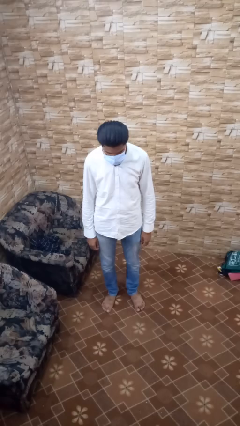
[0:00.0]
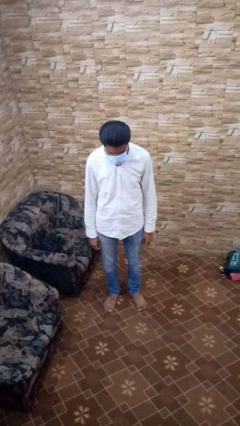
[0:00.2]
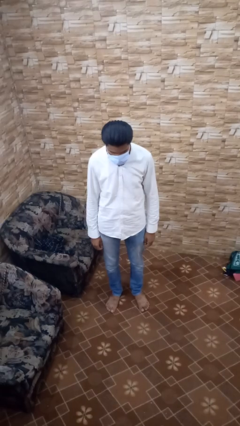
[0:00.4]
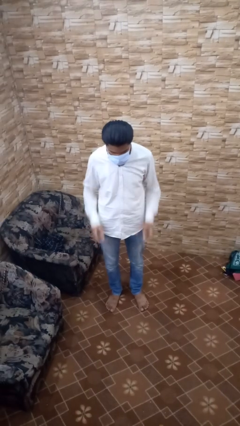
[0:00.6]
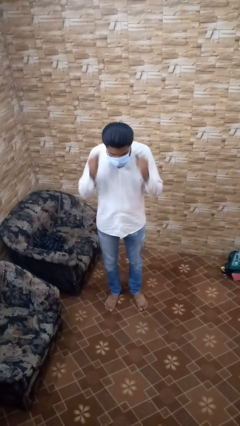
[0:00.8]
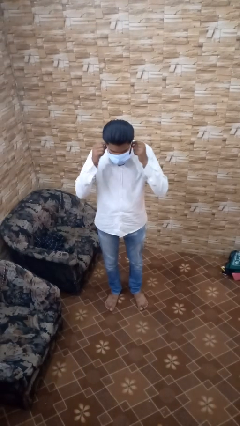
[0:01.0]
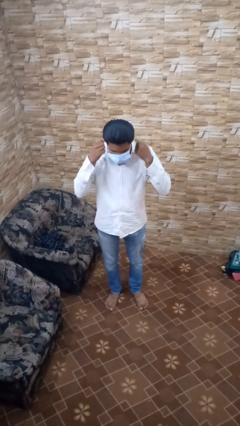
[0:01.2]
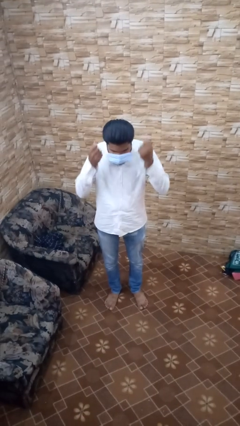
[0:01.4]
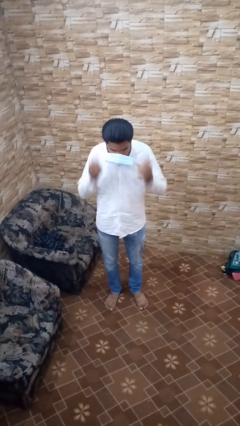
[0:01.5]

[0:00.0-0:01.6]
person takes off facemask

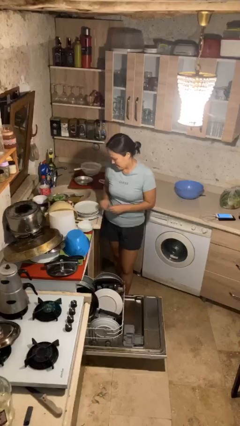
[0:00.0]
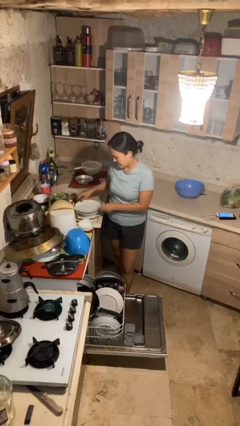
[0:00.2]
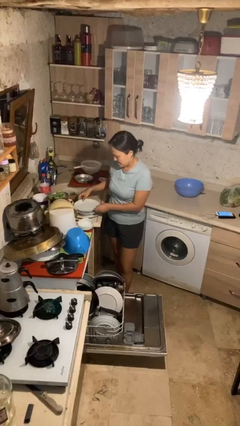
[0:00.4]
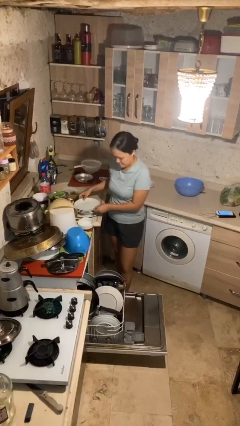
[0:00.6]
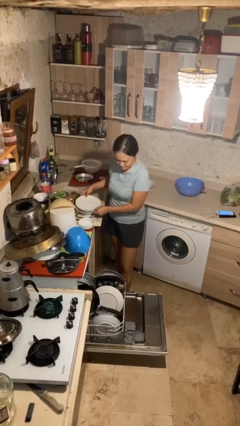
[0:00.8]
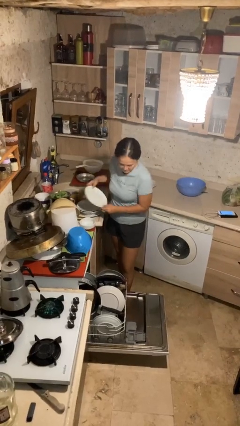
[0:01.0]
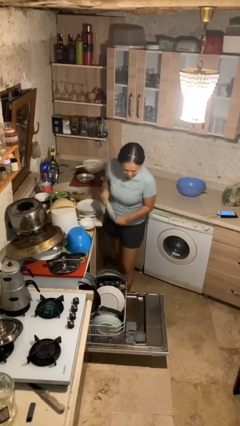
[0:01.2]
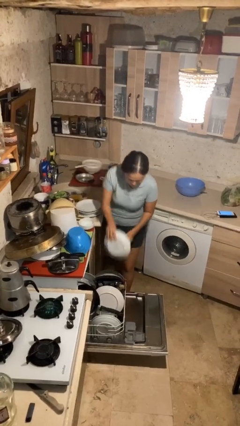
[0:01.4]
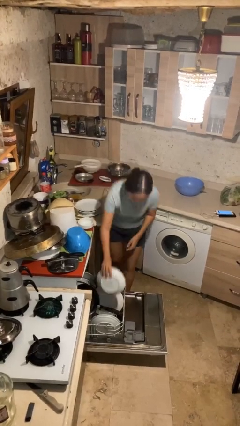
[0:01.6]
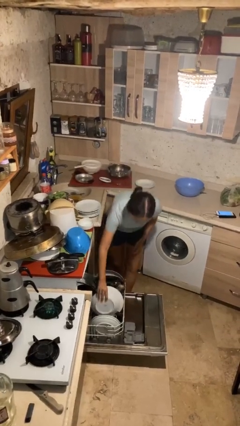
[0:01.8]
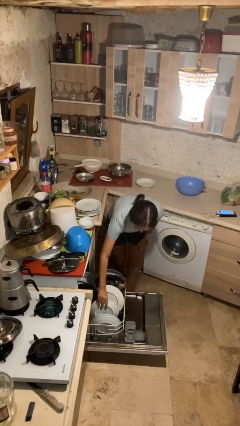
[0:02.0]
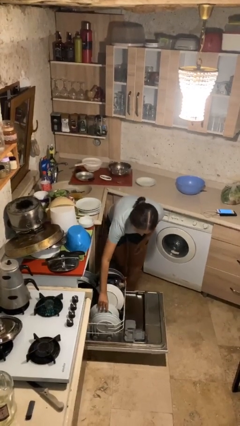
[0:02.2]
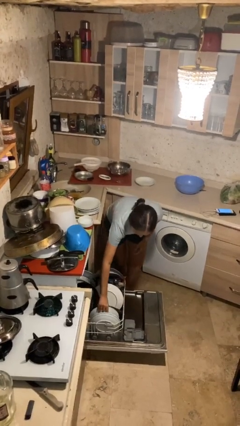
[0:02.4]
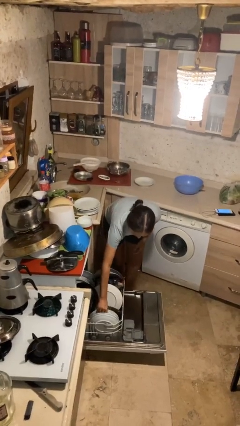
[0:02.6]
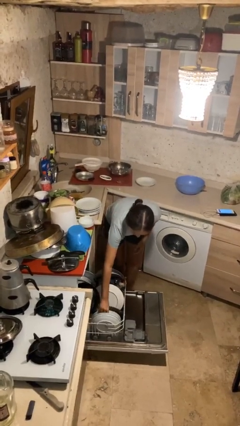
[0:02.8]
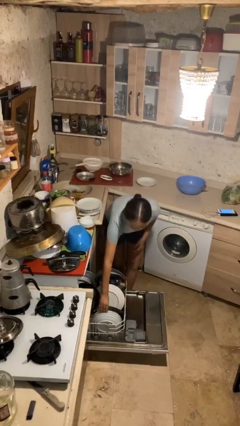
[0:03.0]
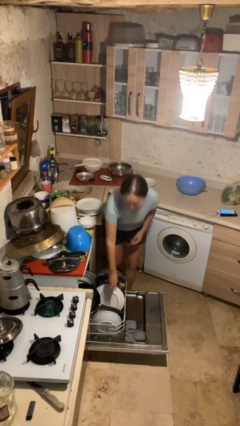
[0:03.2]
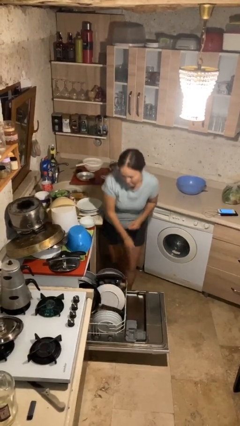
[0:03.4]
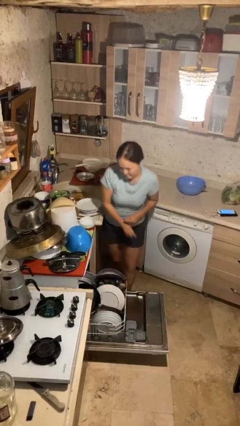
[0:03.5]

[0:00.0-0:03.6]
person loads dishwasher

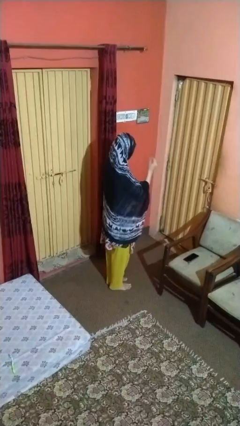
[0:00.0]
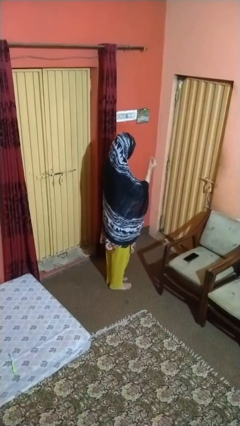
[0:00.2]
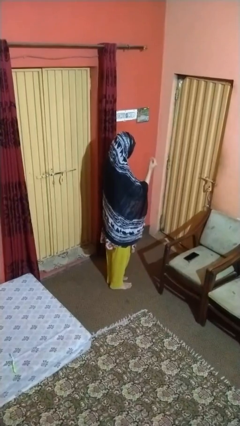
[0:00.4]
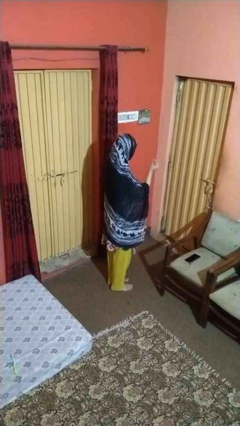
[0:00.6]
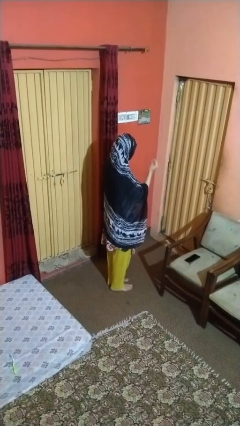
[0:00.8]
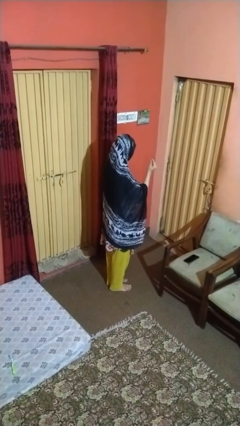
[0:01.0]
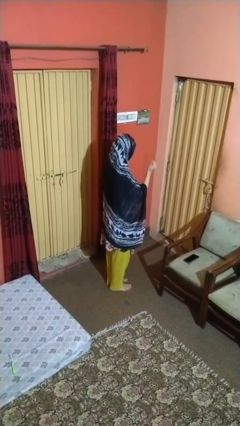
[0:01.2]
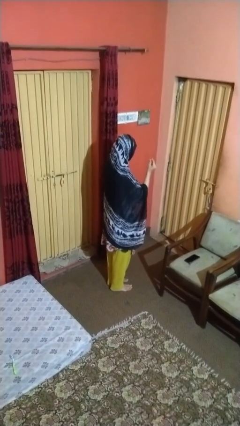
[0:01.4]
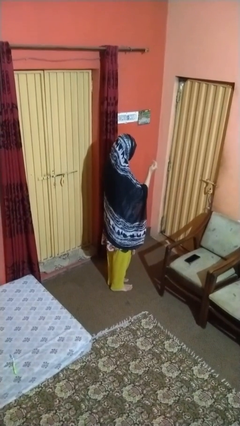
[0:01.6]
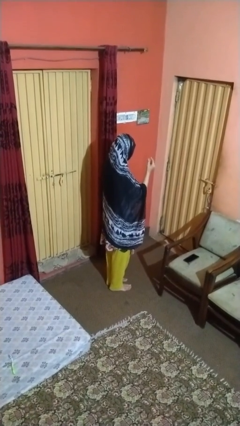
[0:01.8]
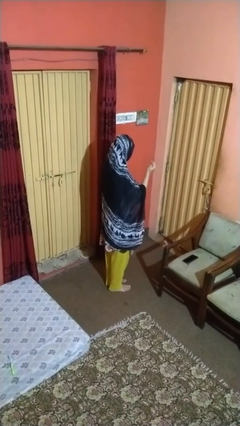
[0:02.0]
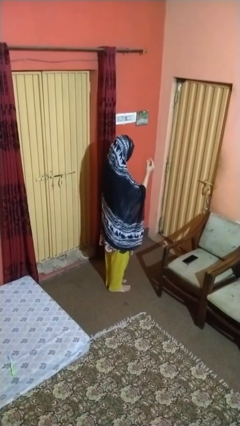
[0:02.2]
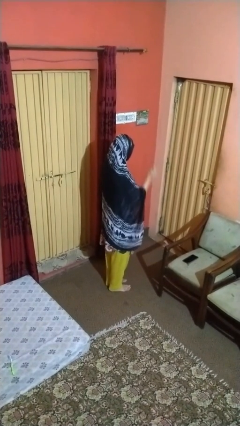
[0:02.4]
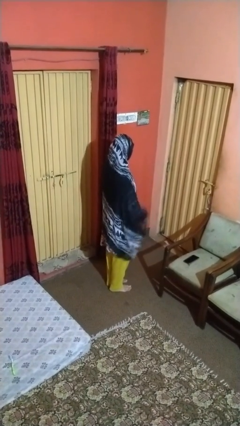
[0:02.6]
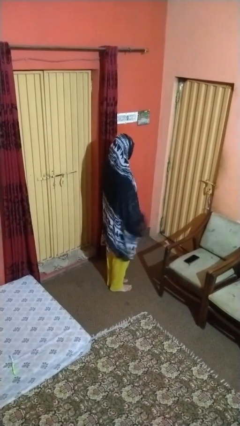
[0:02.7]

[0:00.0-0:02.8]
person snaps fingers

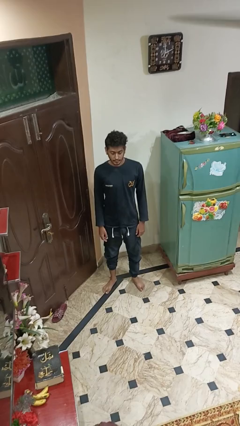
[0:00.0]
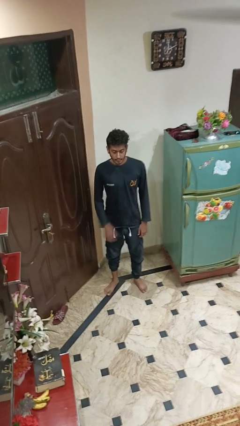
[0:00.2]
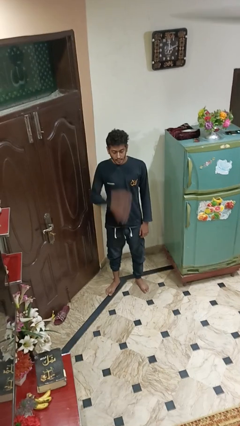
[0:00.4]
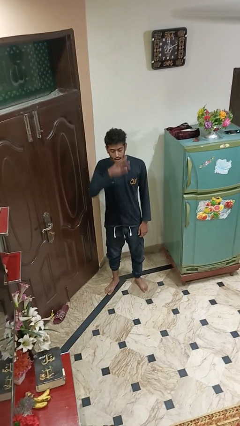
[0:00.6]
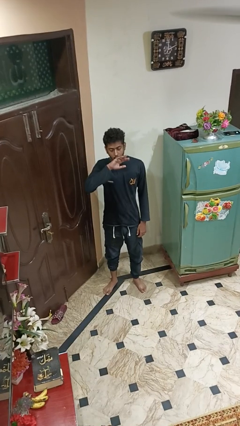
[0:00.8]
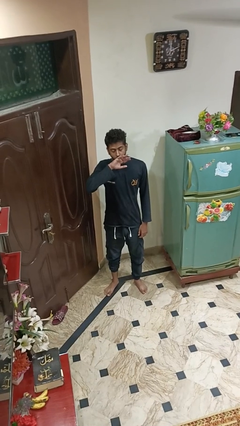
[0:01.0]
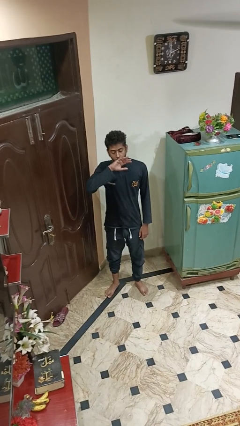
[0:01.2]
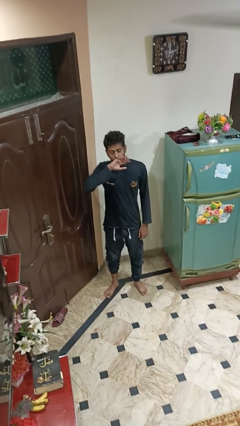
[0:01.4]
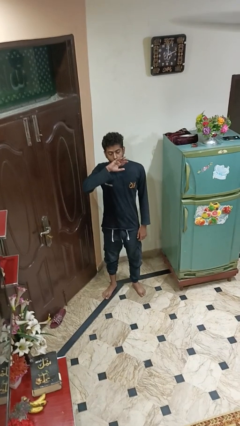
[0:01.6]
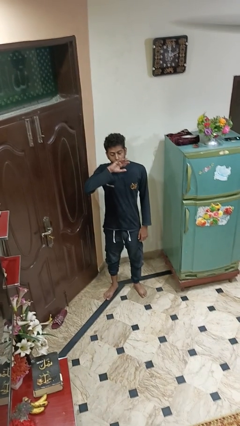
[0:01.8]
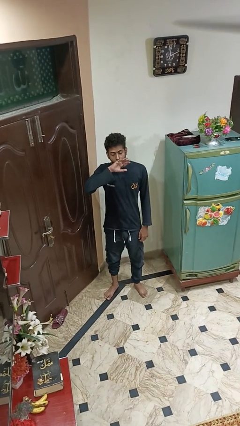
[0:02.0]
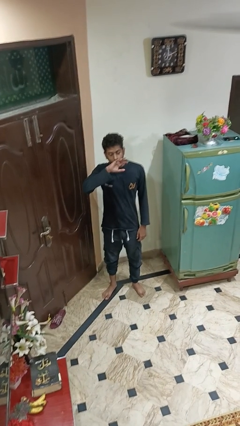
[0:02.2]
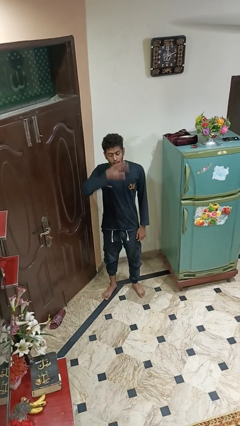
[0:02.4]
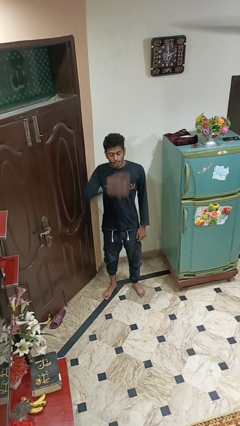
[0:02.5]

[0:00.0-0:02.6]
person yawns

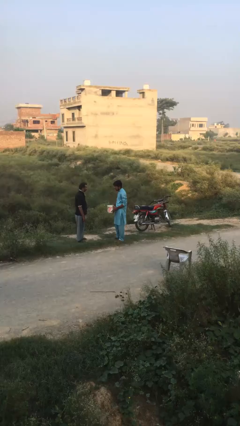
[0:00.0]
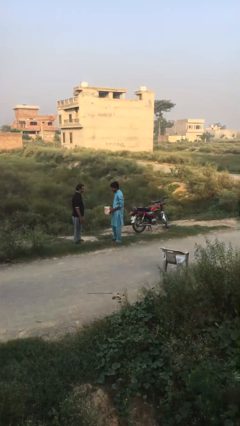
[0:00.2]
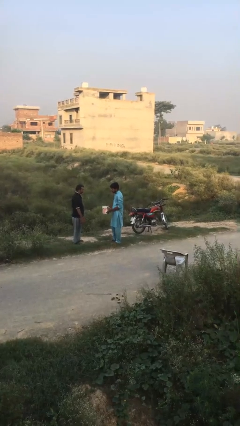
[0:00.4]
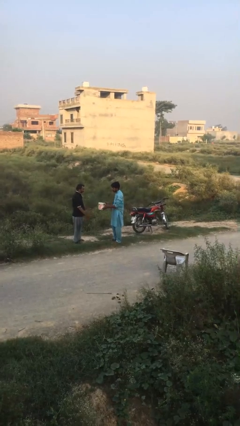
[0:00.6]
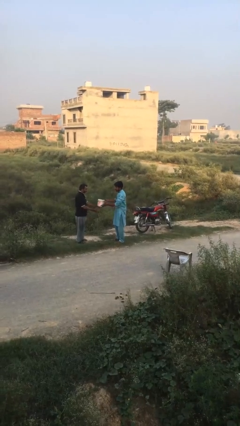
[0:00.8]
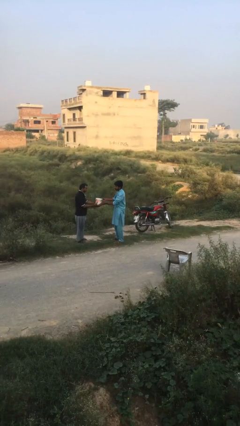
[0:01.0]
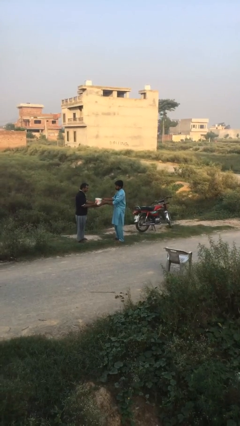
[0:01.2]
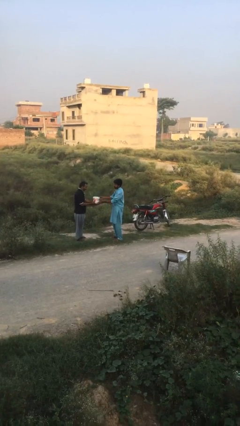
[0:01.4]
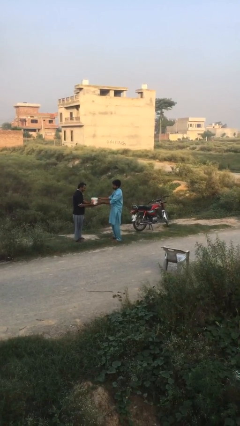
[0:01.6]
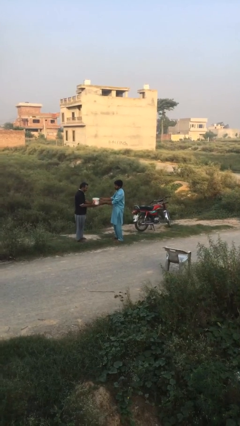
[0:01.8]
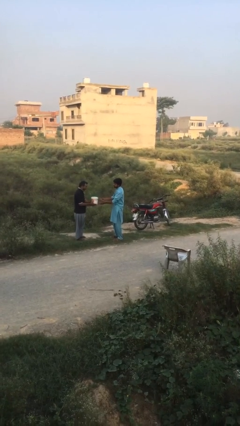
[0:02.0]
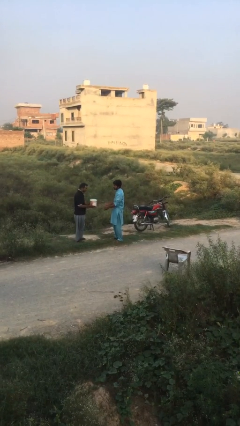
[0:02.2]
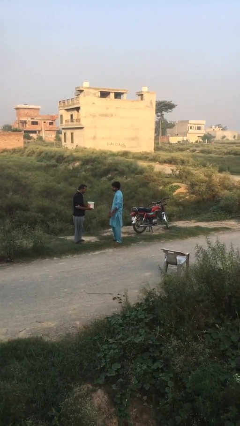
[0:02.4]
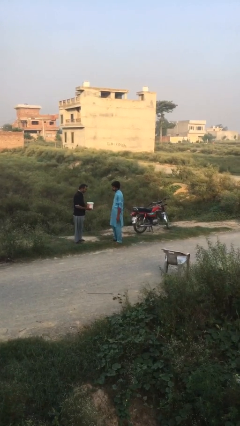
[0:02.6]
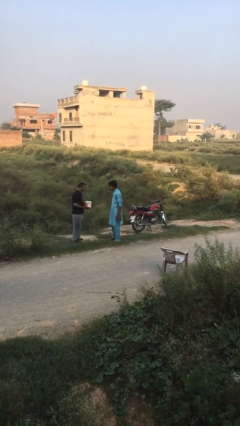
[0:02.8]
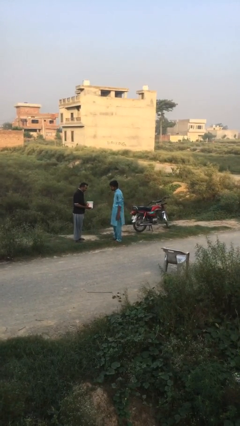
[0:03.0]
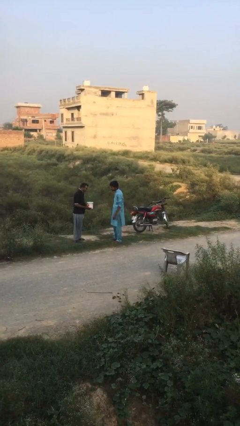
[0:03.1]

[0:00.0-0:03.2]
person transfers object to person

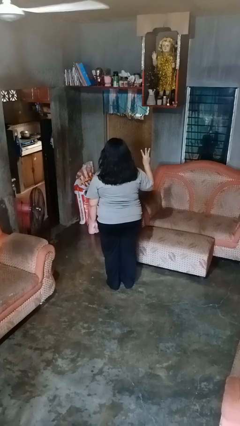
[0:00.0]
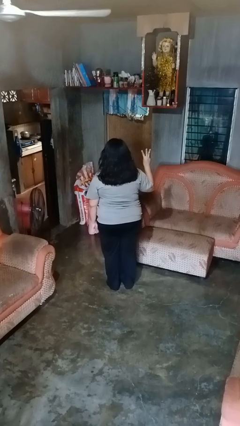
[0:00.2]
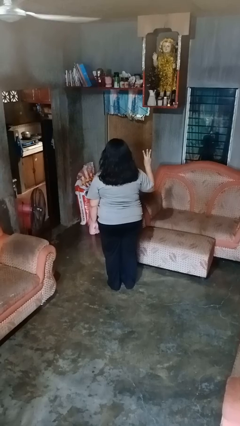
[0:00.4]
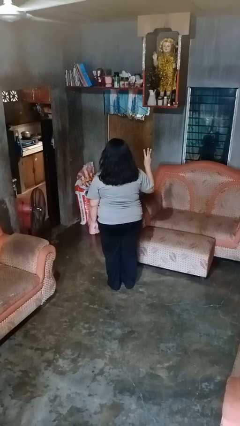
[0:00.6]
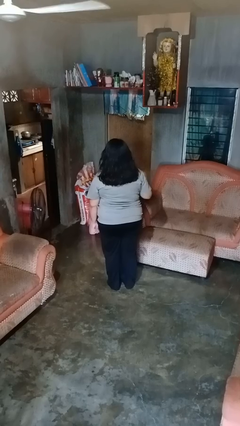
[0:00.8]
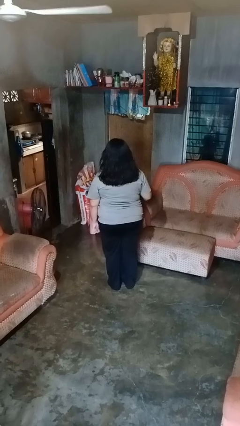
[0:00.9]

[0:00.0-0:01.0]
person gestures number three

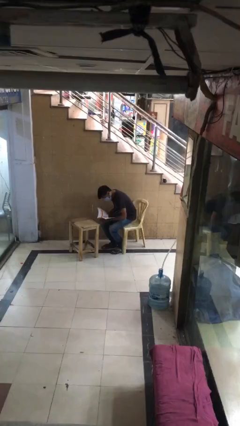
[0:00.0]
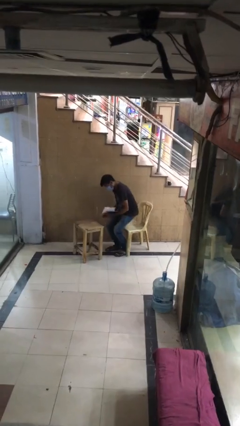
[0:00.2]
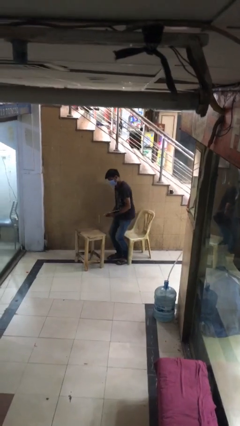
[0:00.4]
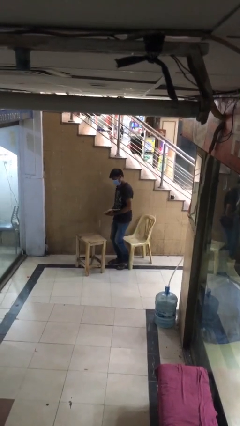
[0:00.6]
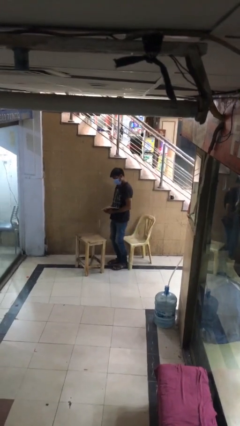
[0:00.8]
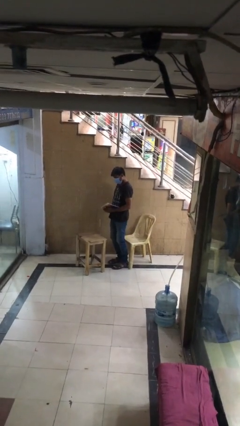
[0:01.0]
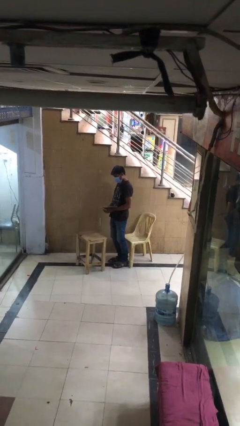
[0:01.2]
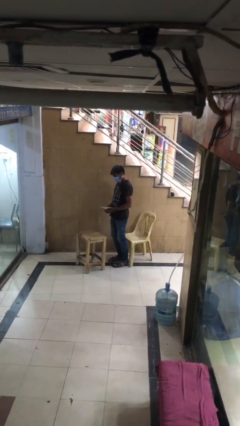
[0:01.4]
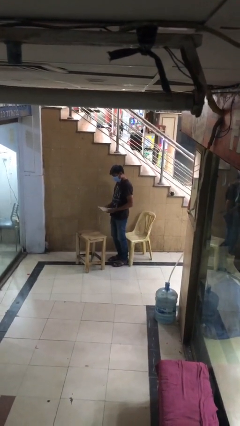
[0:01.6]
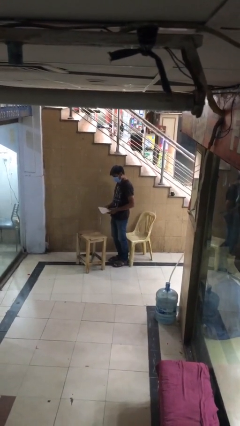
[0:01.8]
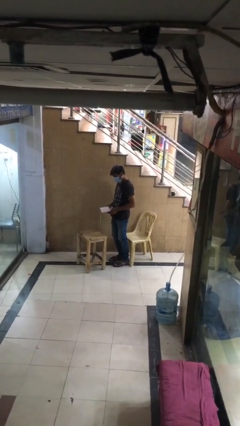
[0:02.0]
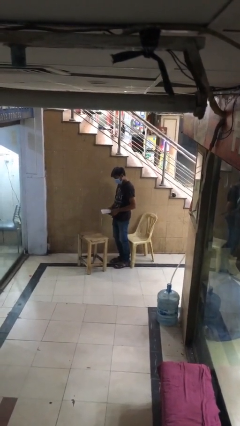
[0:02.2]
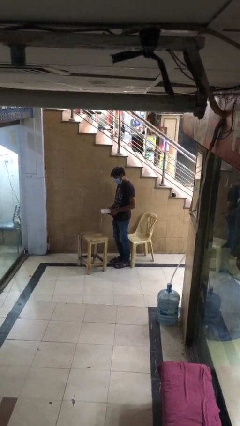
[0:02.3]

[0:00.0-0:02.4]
person stands up
